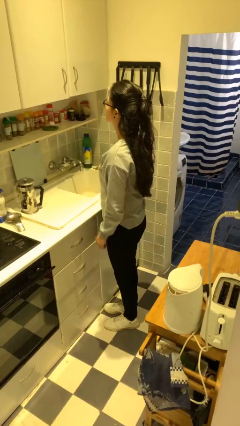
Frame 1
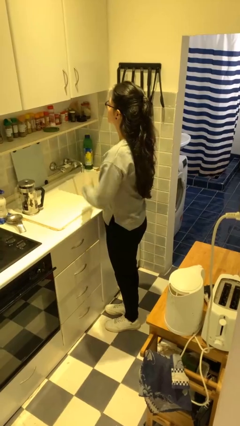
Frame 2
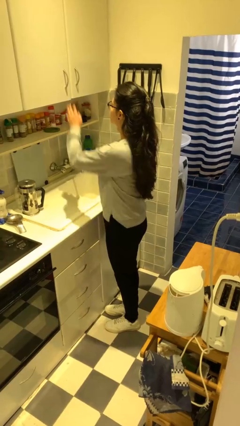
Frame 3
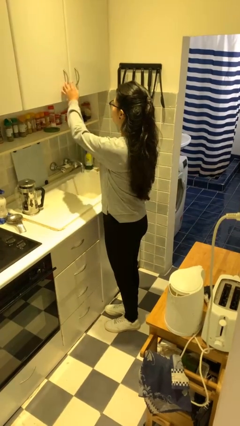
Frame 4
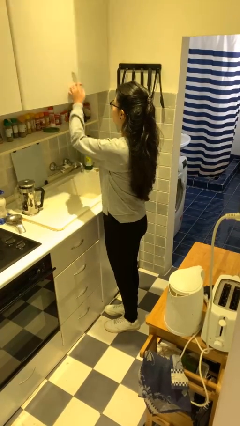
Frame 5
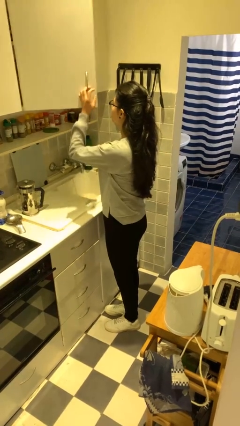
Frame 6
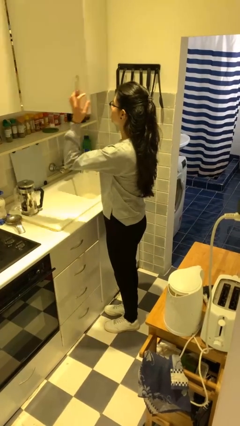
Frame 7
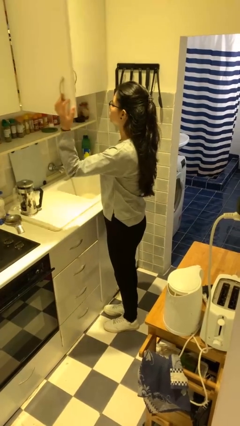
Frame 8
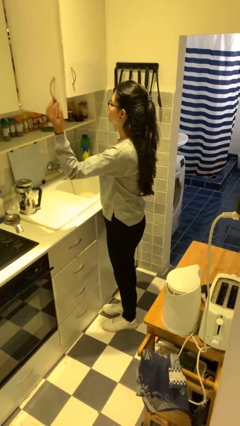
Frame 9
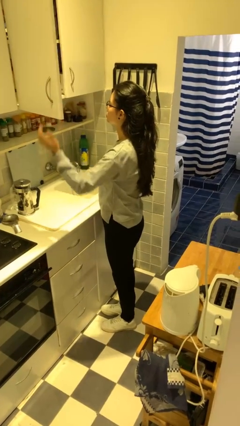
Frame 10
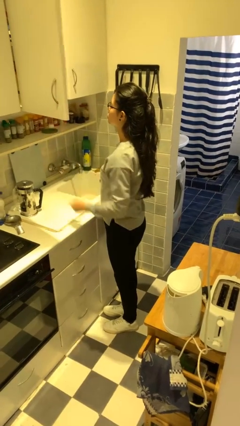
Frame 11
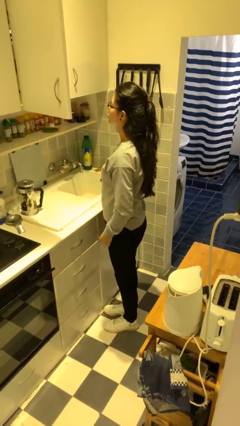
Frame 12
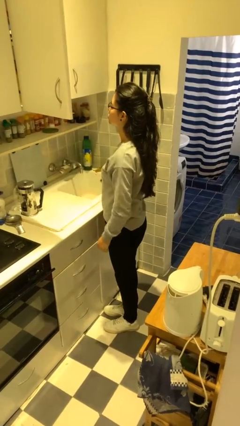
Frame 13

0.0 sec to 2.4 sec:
person opens cabinet

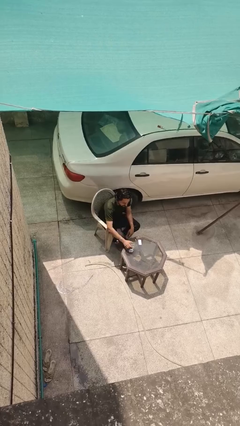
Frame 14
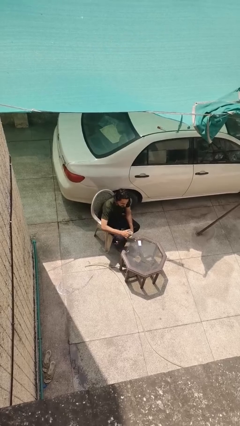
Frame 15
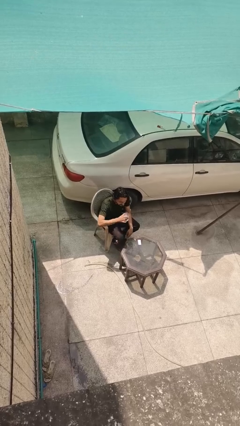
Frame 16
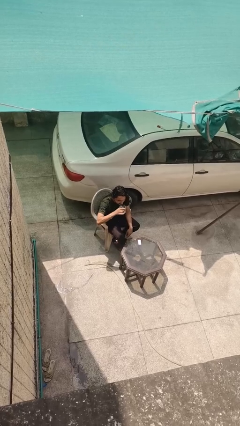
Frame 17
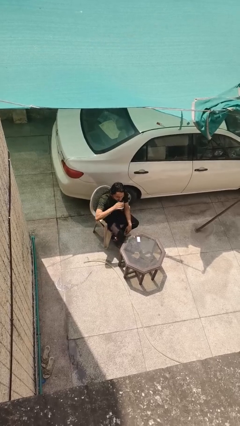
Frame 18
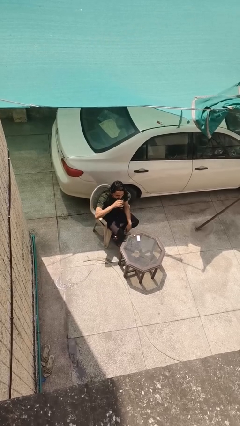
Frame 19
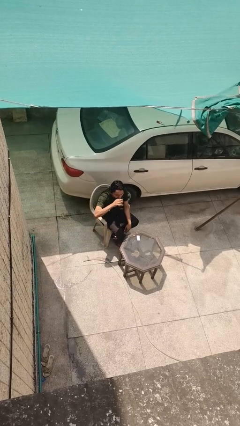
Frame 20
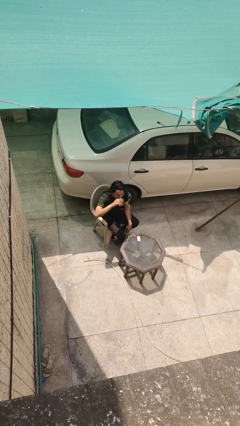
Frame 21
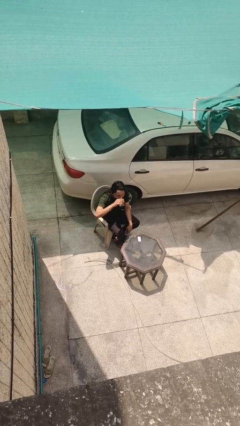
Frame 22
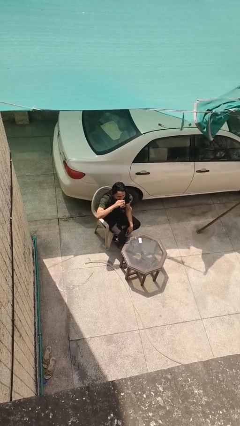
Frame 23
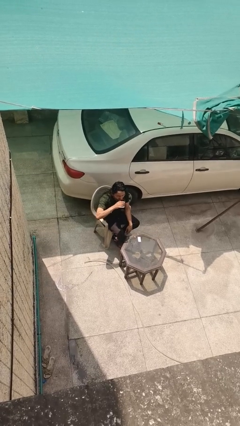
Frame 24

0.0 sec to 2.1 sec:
person drinks from cup

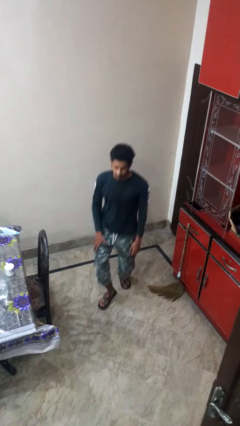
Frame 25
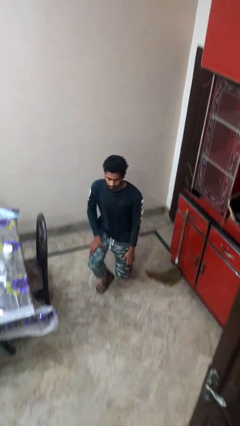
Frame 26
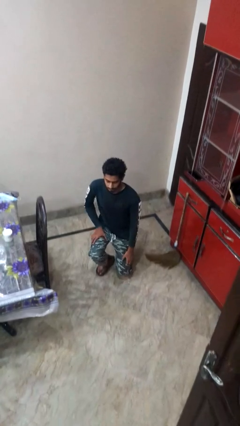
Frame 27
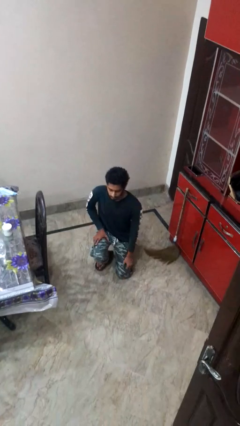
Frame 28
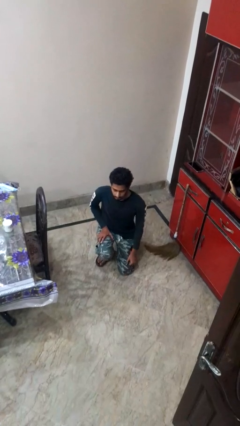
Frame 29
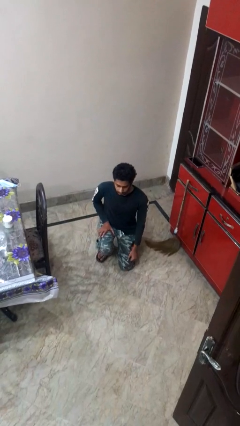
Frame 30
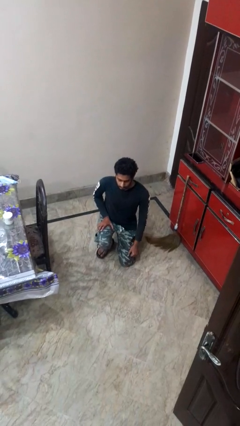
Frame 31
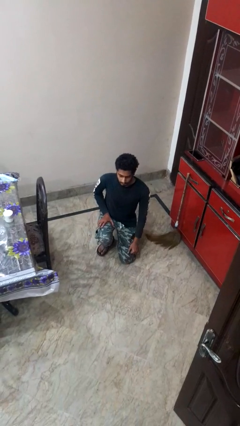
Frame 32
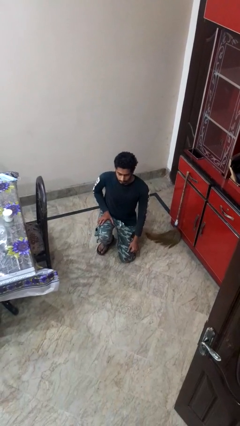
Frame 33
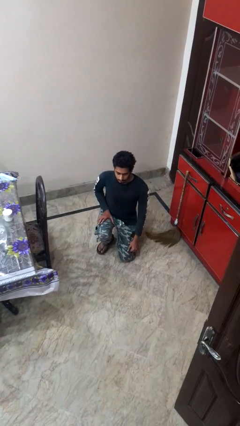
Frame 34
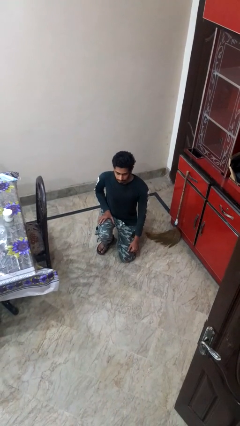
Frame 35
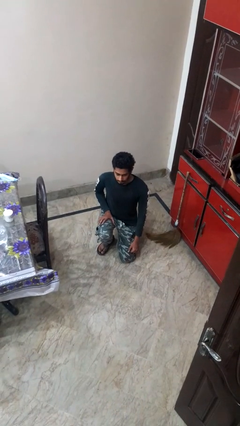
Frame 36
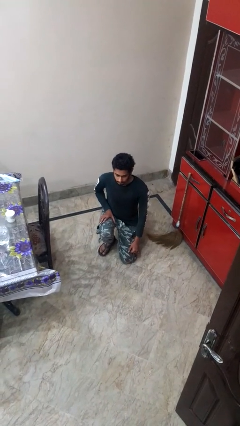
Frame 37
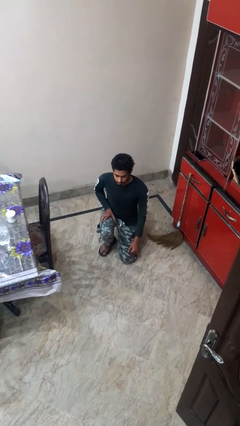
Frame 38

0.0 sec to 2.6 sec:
person kneels

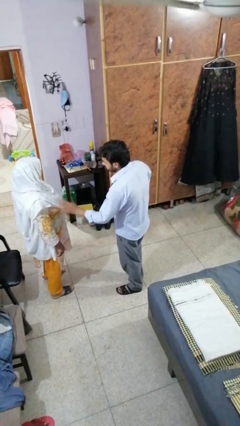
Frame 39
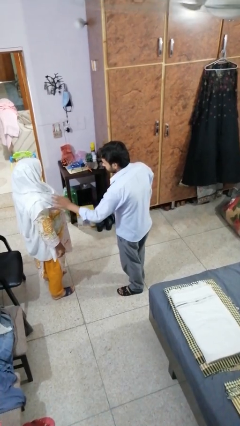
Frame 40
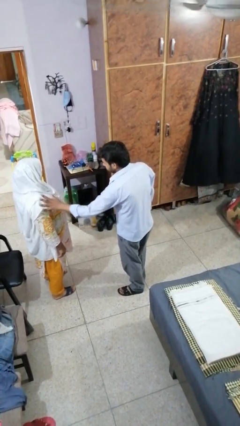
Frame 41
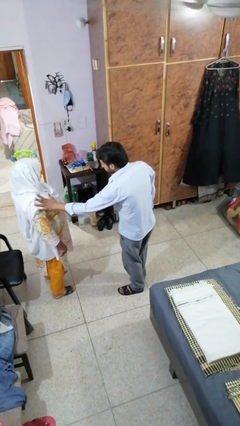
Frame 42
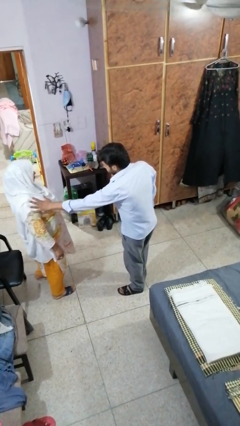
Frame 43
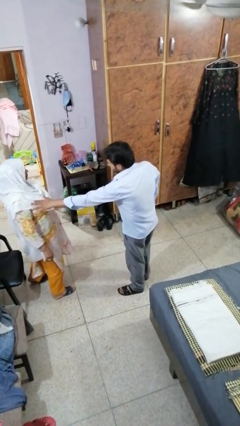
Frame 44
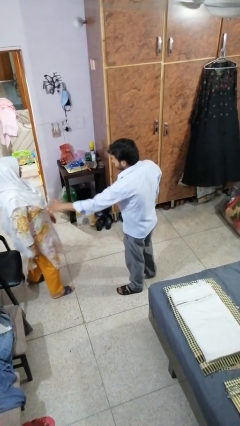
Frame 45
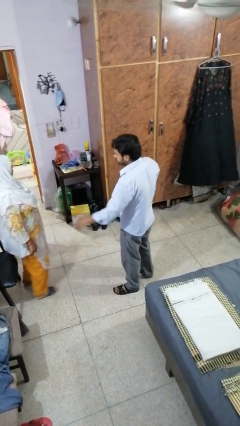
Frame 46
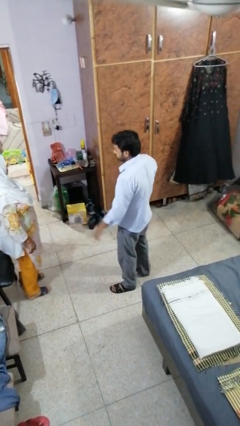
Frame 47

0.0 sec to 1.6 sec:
person shoves person

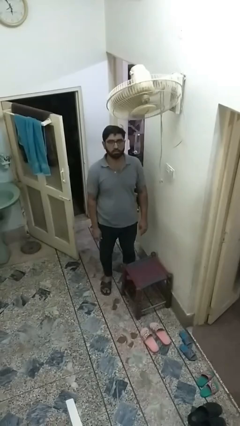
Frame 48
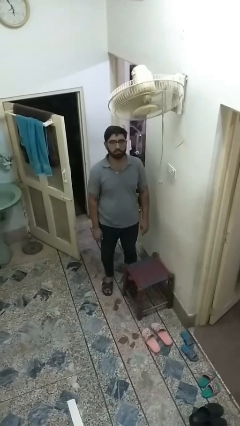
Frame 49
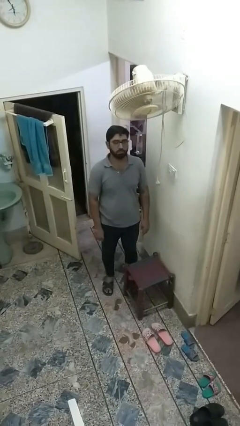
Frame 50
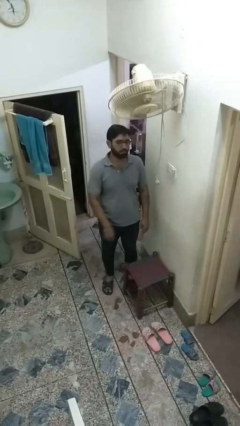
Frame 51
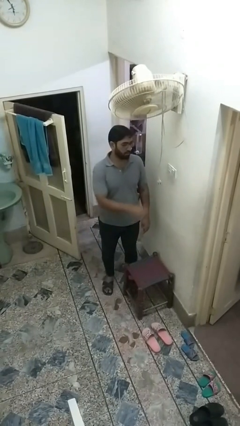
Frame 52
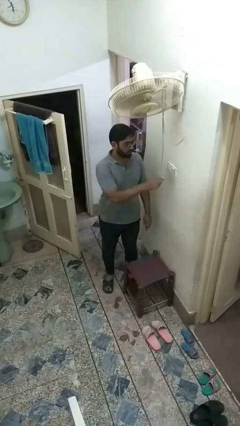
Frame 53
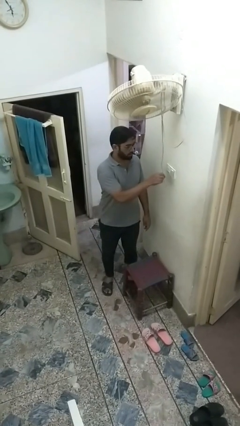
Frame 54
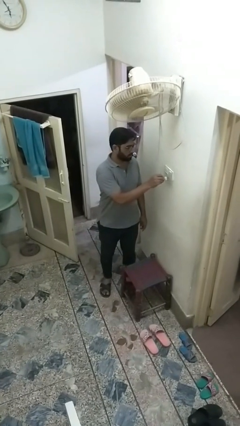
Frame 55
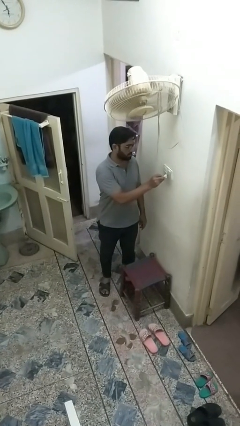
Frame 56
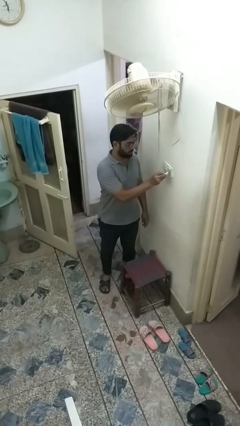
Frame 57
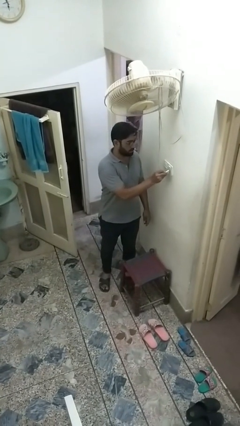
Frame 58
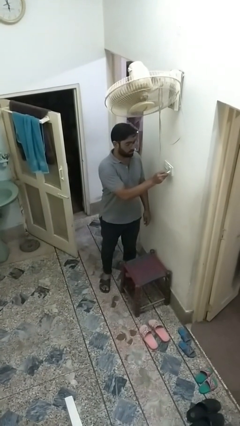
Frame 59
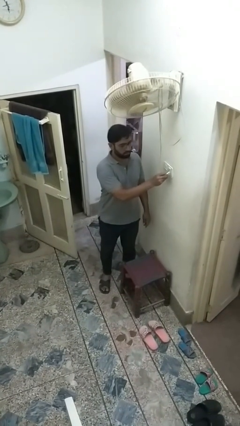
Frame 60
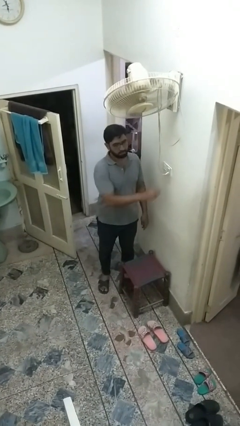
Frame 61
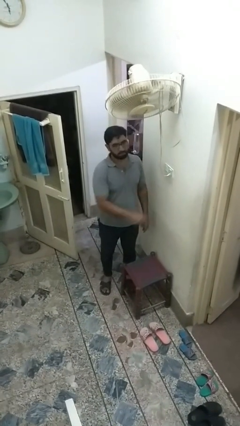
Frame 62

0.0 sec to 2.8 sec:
person plugs into electrical socket

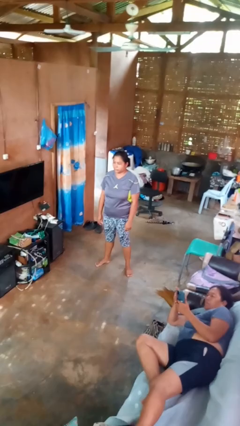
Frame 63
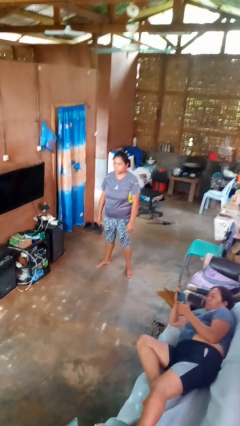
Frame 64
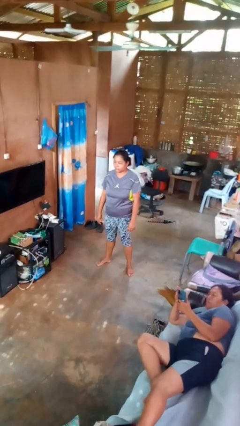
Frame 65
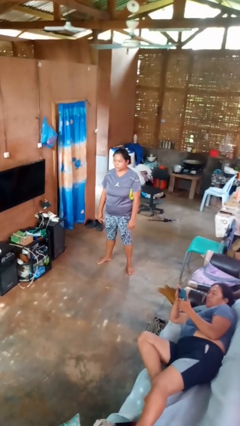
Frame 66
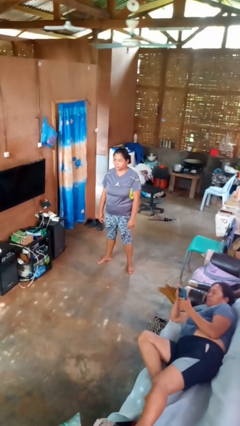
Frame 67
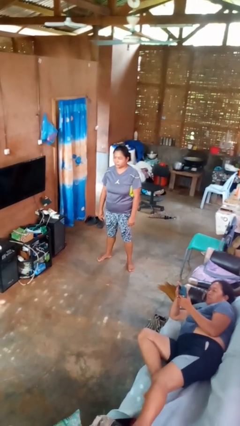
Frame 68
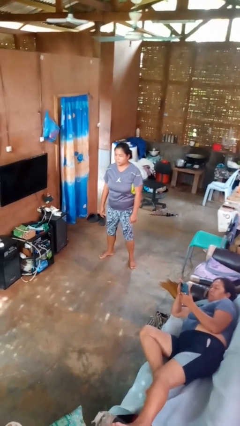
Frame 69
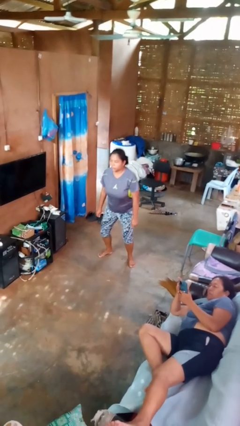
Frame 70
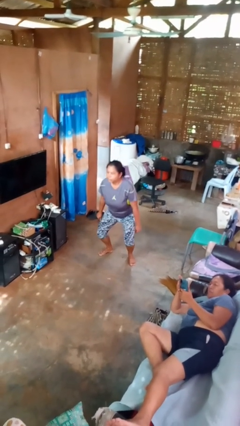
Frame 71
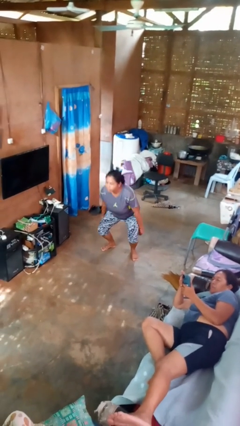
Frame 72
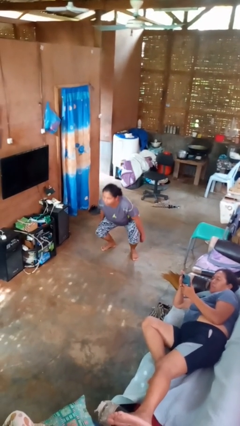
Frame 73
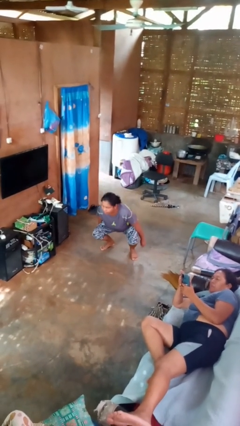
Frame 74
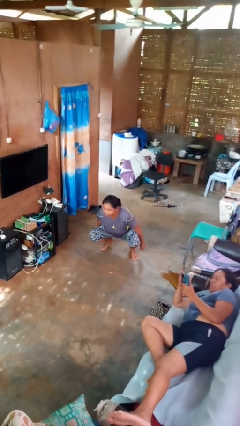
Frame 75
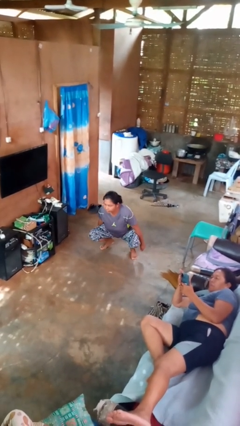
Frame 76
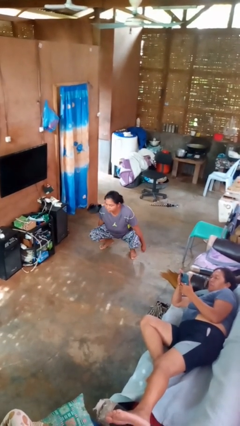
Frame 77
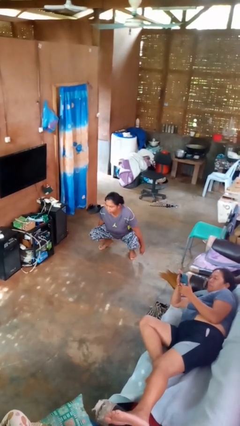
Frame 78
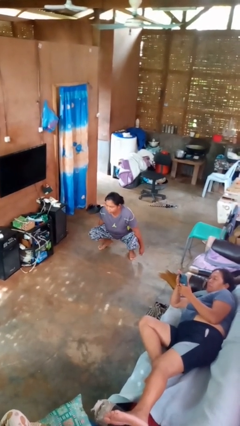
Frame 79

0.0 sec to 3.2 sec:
person squats

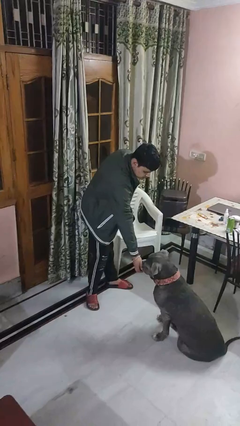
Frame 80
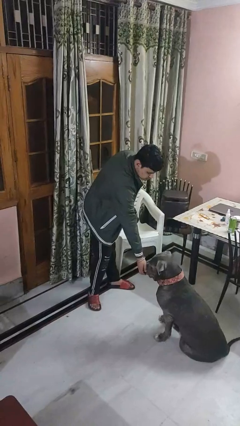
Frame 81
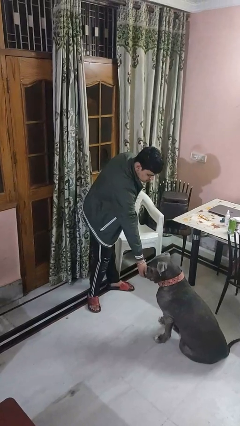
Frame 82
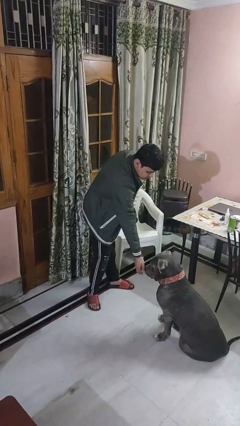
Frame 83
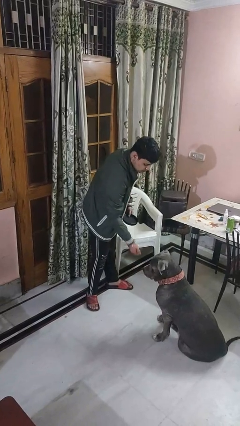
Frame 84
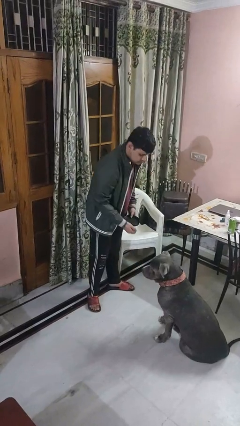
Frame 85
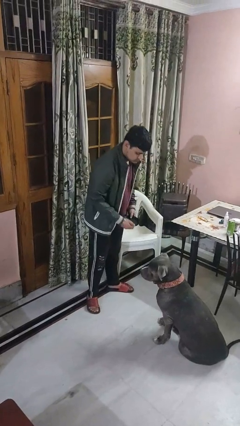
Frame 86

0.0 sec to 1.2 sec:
person feeds dog

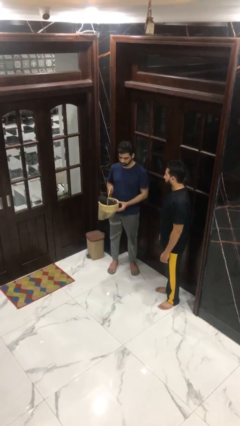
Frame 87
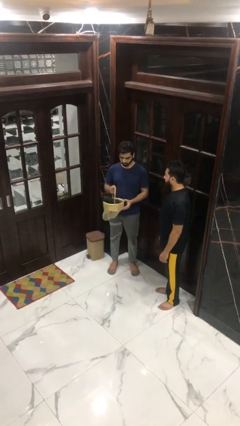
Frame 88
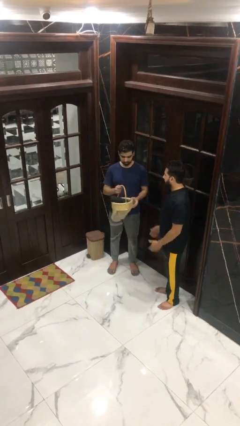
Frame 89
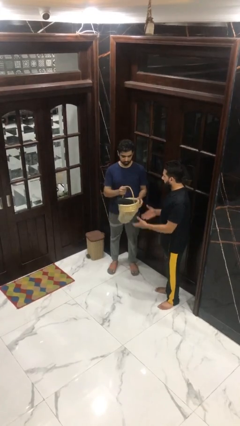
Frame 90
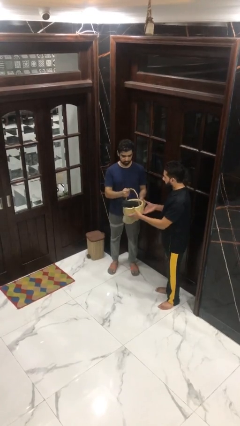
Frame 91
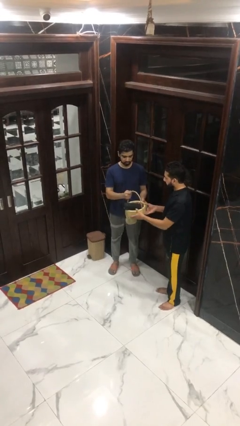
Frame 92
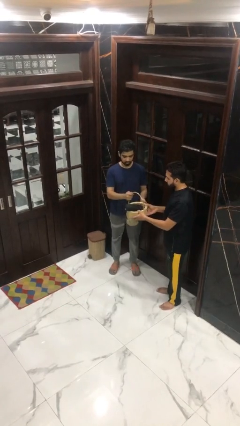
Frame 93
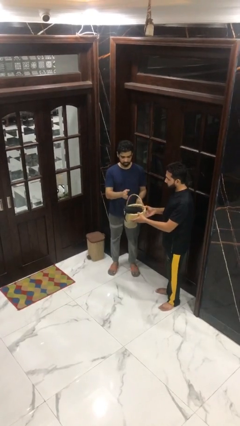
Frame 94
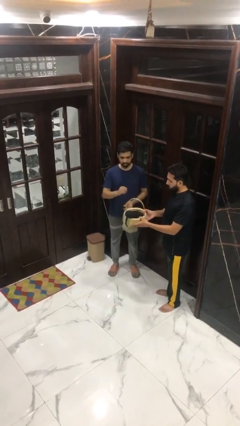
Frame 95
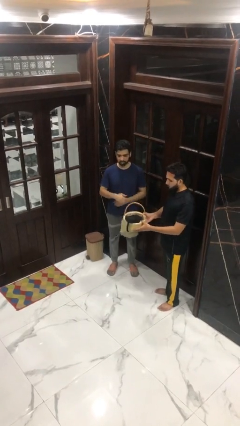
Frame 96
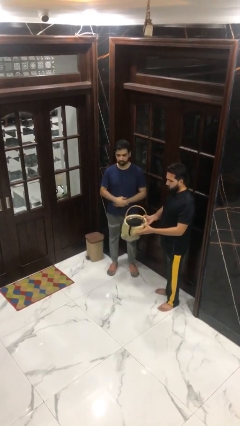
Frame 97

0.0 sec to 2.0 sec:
person transfers object to person
